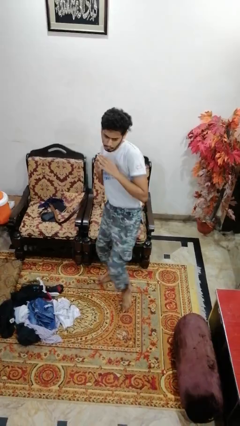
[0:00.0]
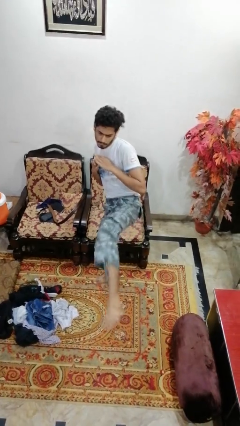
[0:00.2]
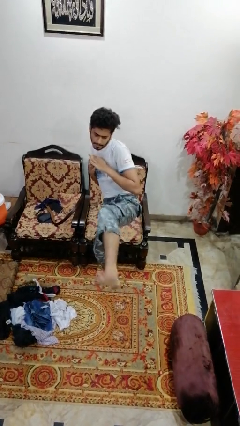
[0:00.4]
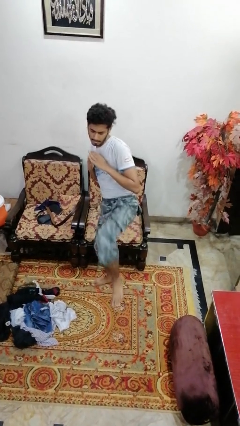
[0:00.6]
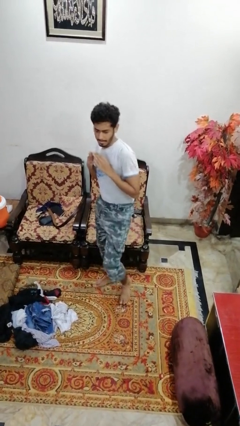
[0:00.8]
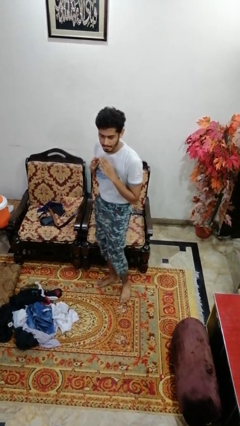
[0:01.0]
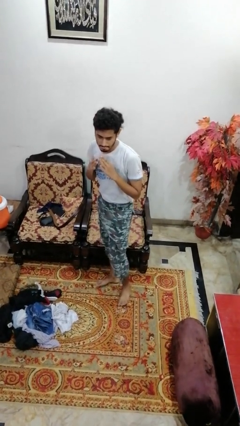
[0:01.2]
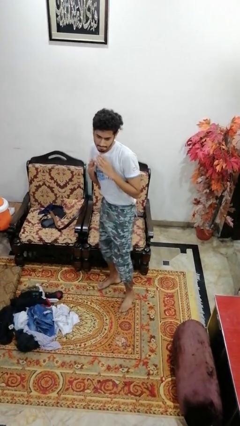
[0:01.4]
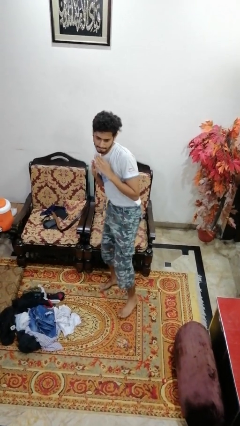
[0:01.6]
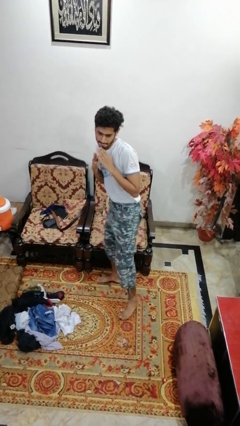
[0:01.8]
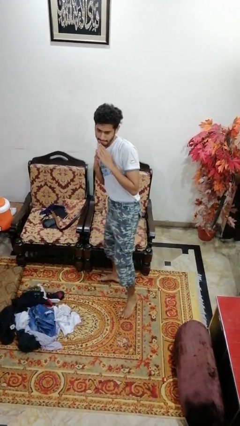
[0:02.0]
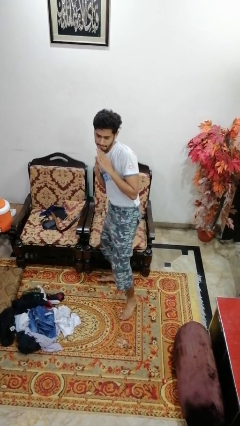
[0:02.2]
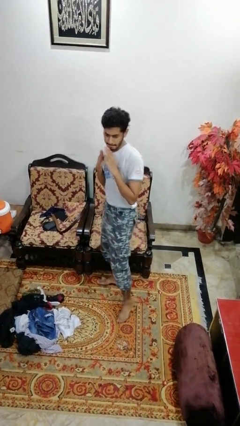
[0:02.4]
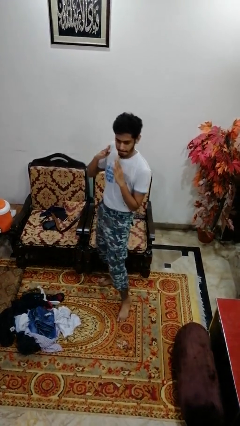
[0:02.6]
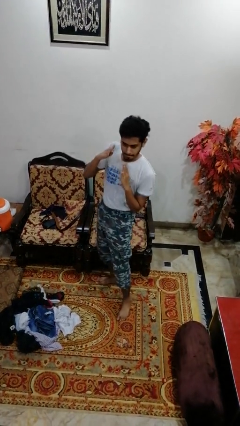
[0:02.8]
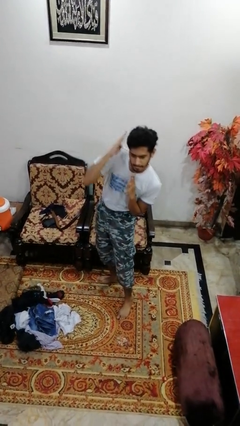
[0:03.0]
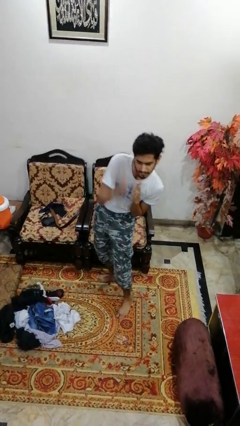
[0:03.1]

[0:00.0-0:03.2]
person karate kicks

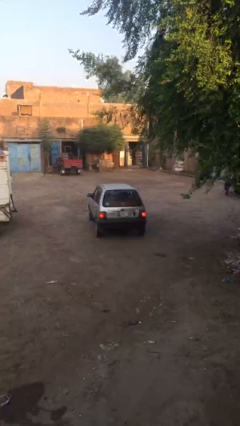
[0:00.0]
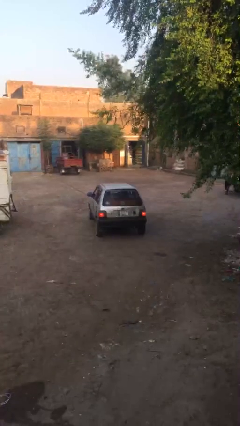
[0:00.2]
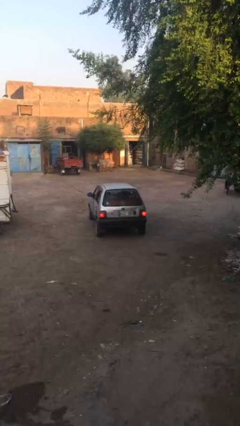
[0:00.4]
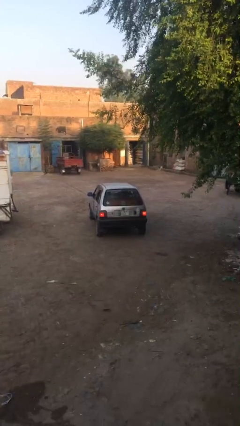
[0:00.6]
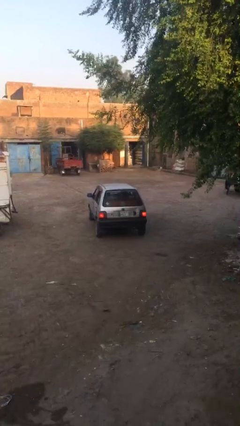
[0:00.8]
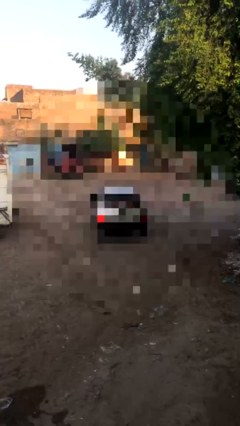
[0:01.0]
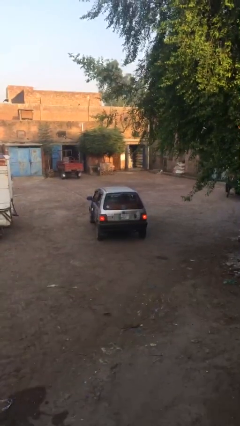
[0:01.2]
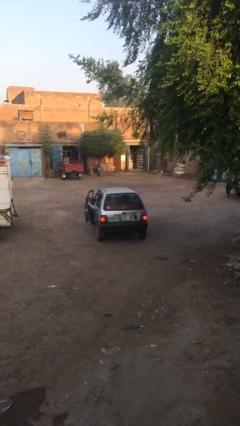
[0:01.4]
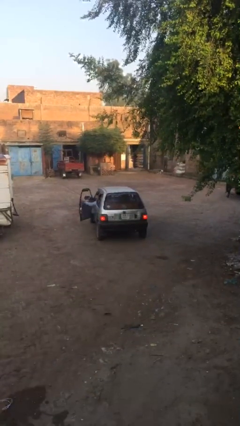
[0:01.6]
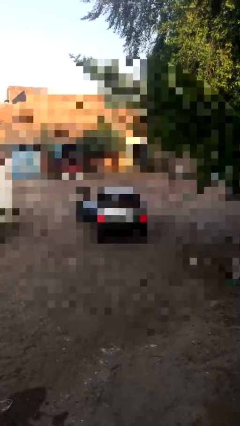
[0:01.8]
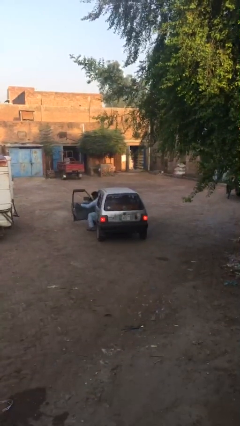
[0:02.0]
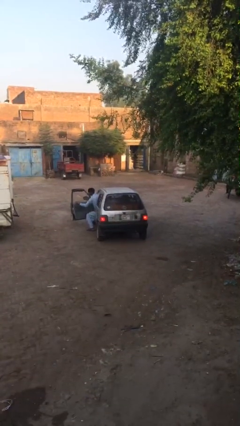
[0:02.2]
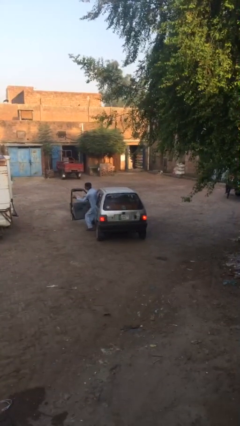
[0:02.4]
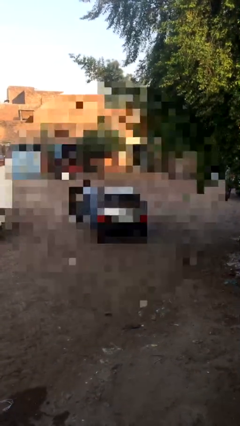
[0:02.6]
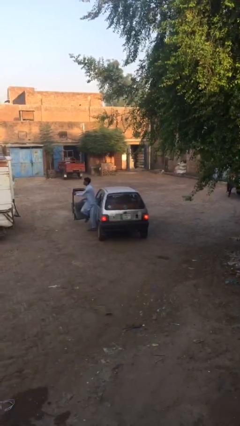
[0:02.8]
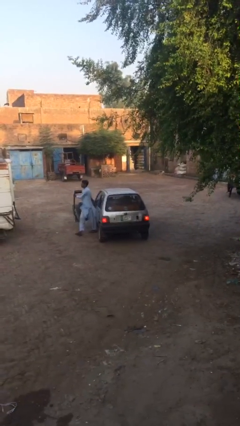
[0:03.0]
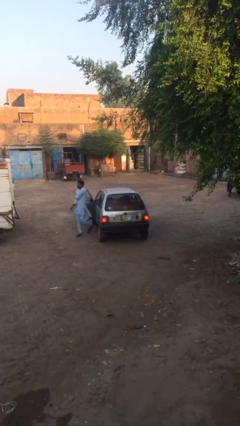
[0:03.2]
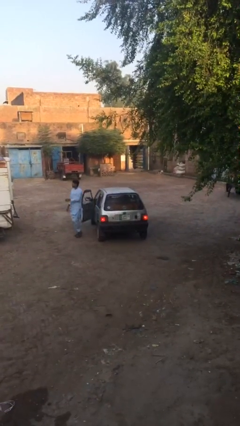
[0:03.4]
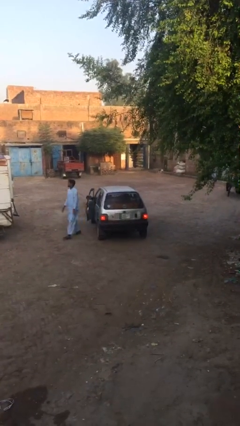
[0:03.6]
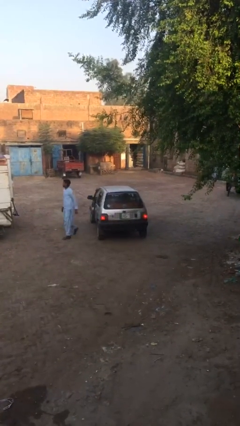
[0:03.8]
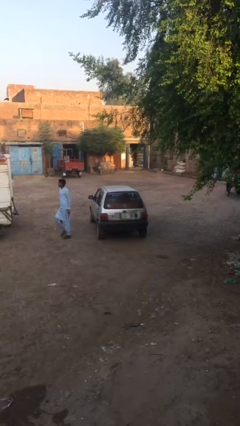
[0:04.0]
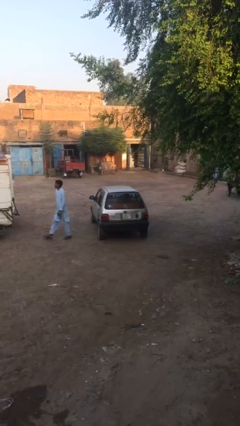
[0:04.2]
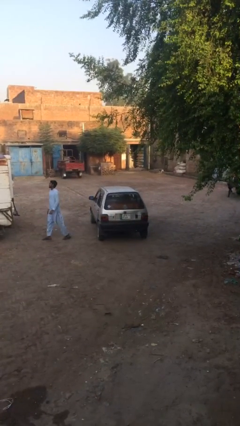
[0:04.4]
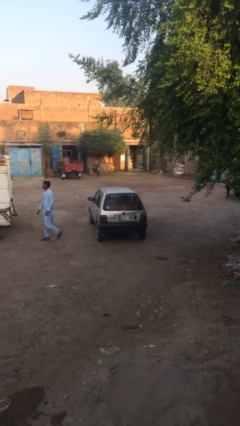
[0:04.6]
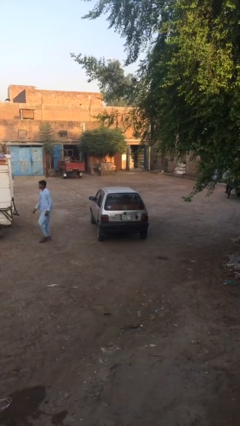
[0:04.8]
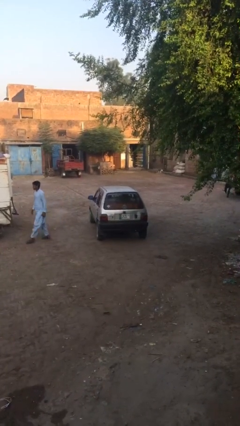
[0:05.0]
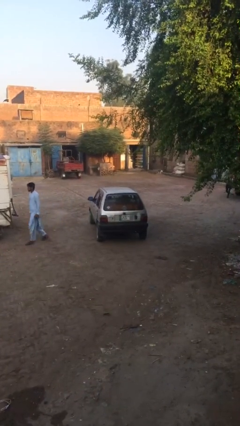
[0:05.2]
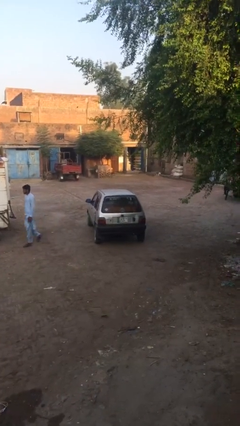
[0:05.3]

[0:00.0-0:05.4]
car drops off person

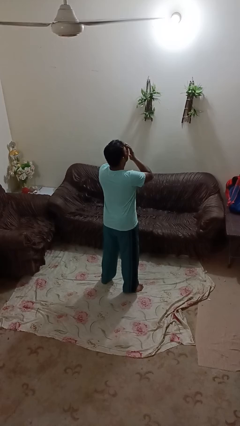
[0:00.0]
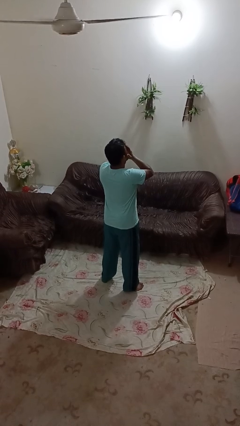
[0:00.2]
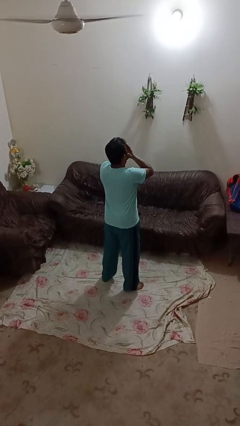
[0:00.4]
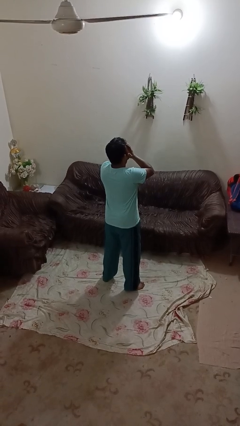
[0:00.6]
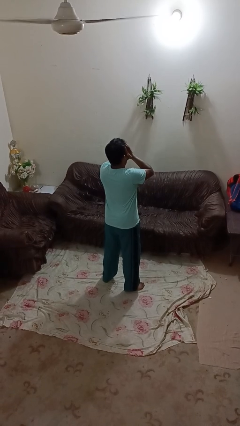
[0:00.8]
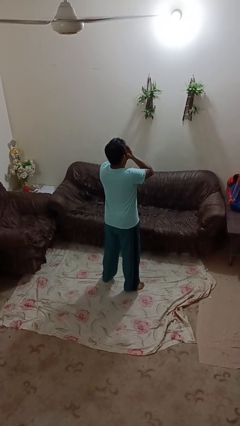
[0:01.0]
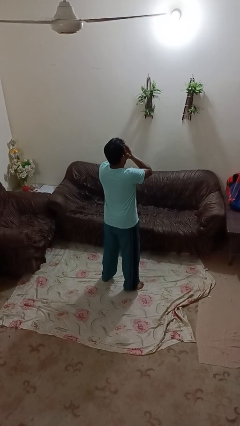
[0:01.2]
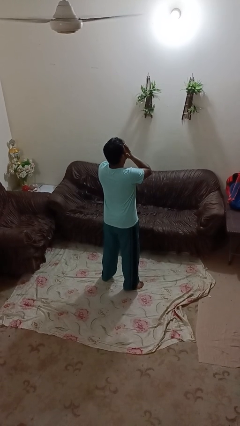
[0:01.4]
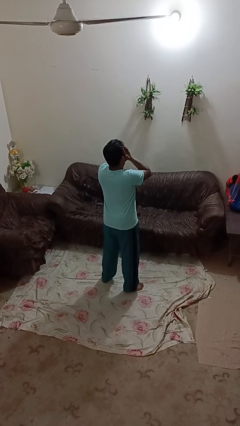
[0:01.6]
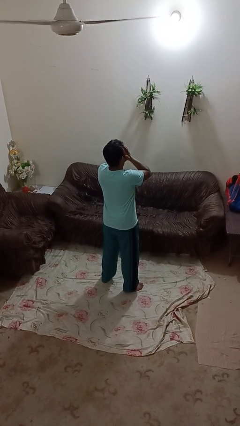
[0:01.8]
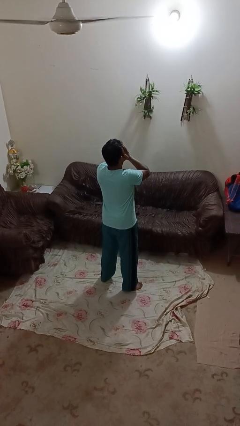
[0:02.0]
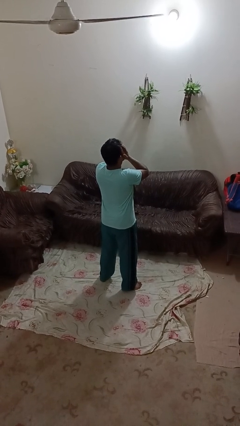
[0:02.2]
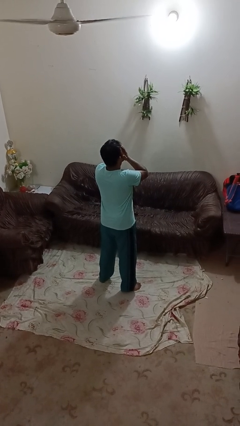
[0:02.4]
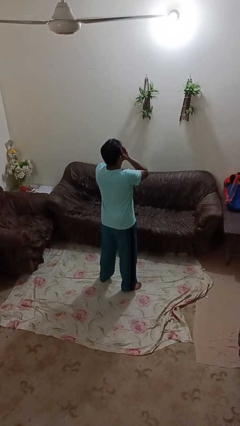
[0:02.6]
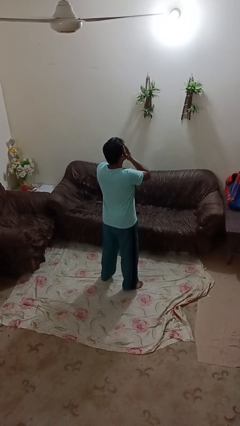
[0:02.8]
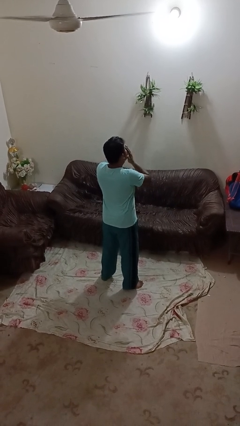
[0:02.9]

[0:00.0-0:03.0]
person covers face with hands

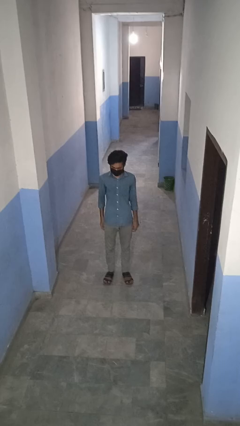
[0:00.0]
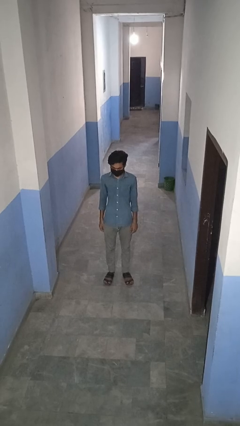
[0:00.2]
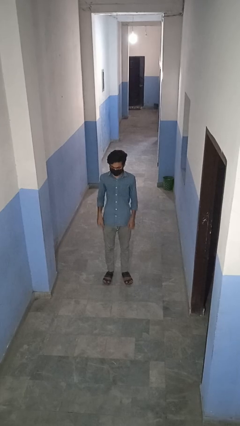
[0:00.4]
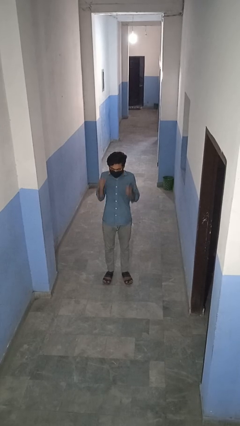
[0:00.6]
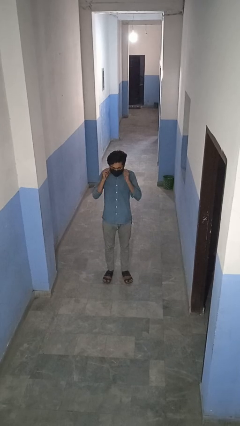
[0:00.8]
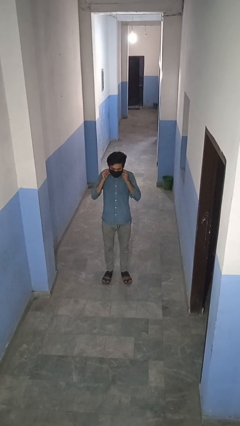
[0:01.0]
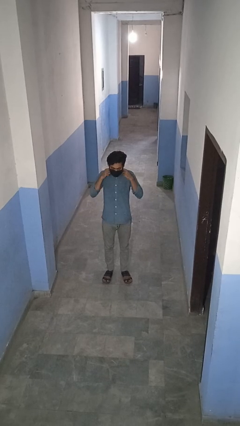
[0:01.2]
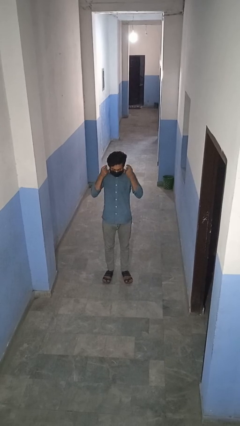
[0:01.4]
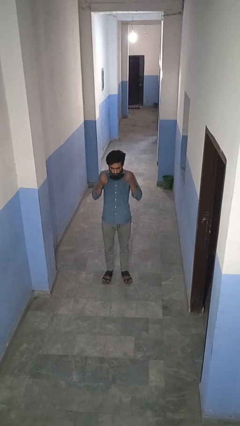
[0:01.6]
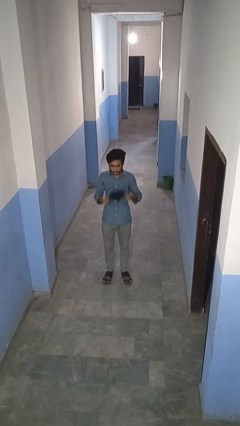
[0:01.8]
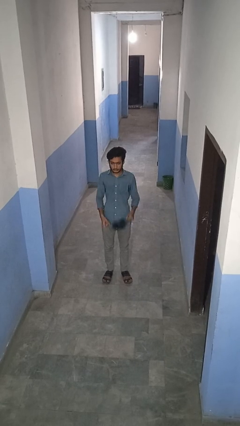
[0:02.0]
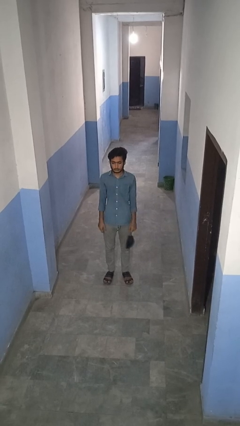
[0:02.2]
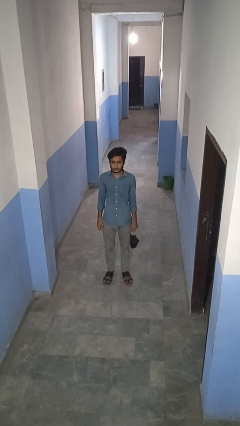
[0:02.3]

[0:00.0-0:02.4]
person takes off facemask

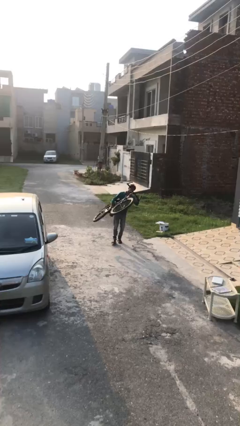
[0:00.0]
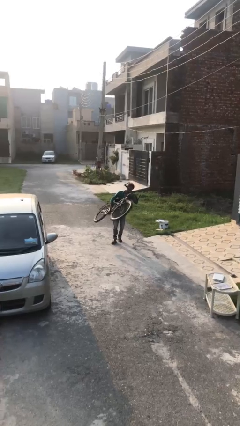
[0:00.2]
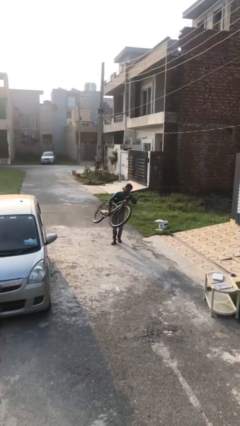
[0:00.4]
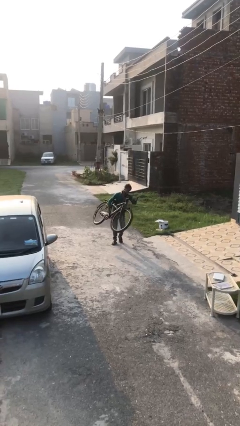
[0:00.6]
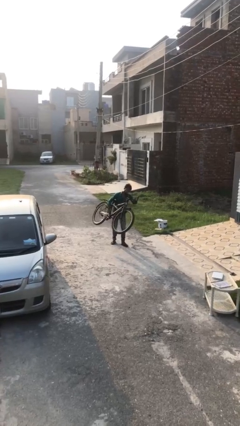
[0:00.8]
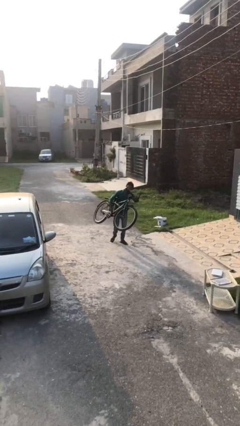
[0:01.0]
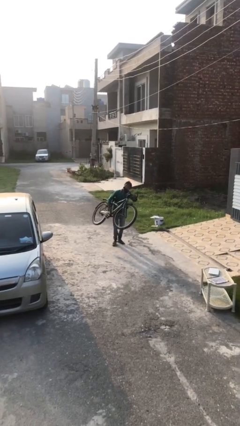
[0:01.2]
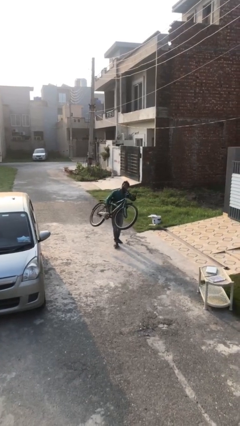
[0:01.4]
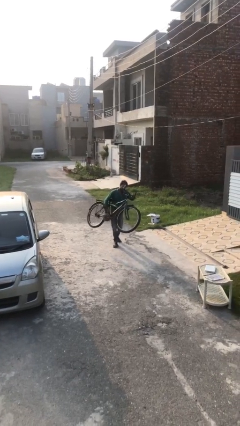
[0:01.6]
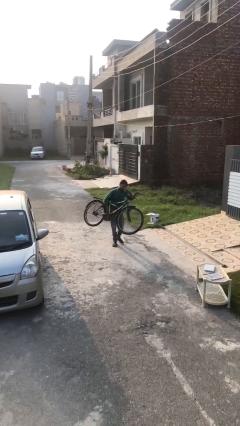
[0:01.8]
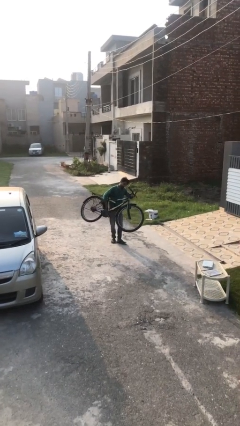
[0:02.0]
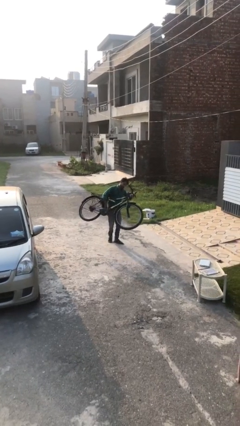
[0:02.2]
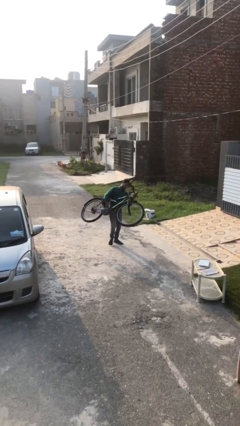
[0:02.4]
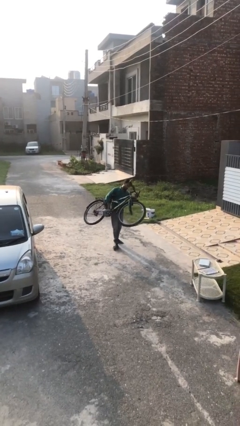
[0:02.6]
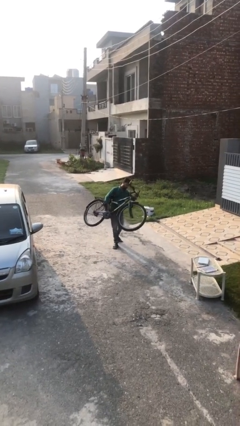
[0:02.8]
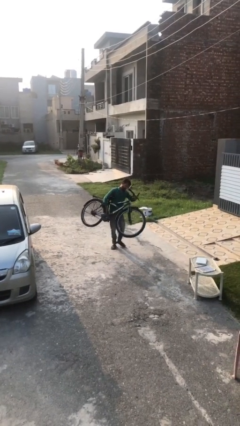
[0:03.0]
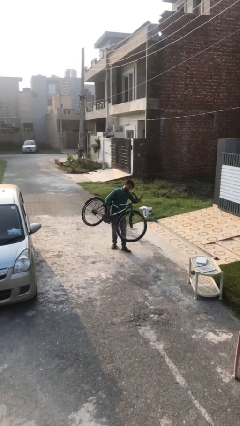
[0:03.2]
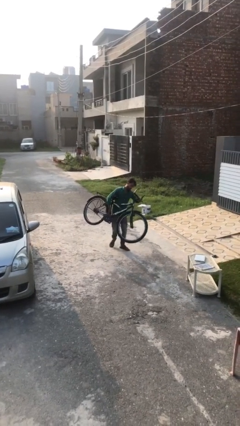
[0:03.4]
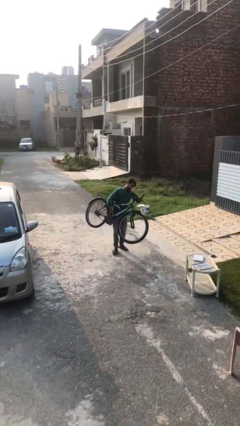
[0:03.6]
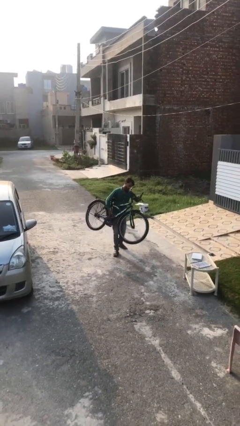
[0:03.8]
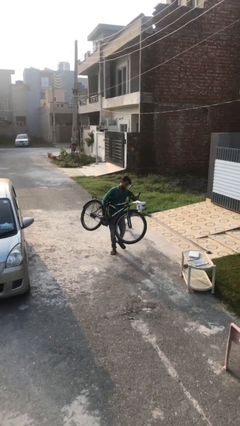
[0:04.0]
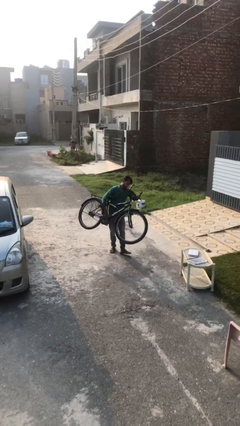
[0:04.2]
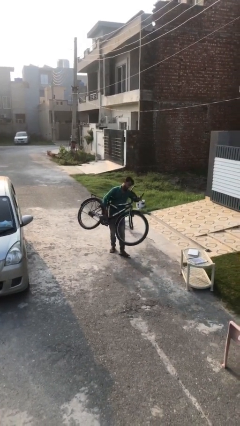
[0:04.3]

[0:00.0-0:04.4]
person carries heavy object
